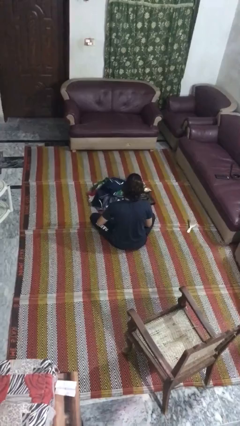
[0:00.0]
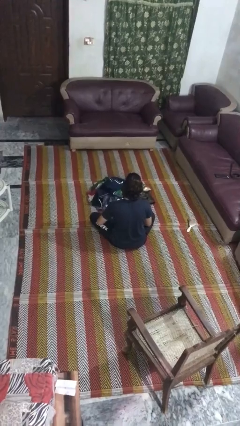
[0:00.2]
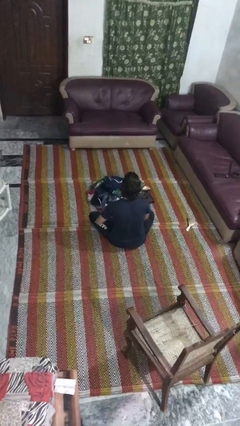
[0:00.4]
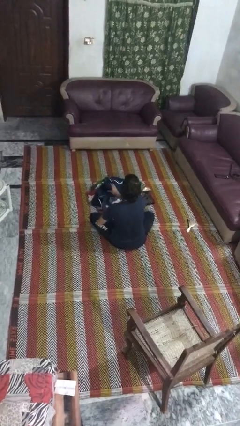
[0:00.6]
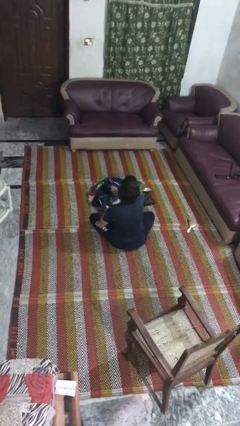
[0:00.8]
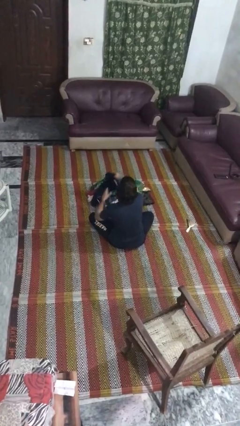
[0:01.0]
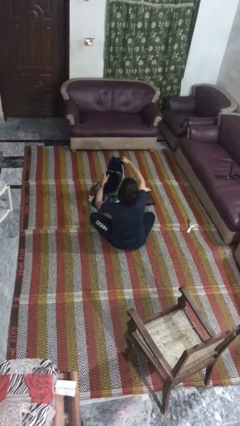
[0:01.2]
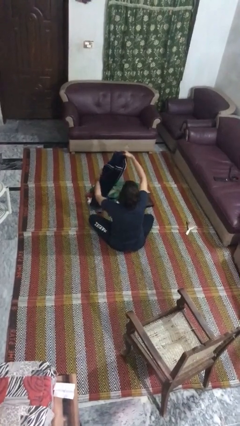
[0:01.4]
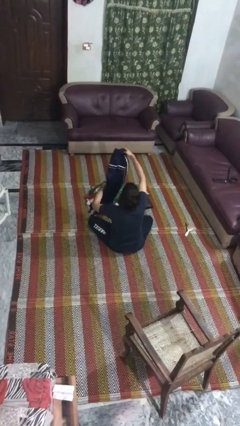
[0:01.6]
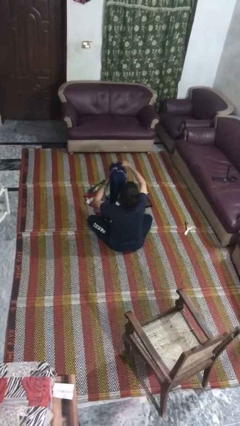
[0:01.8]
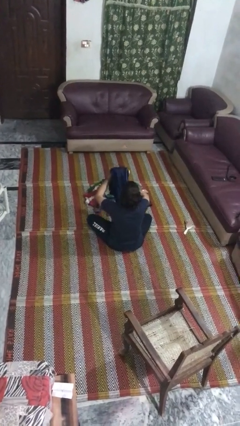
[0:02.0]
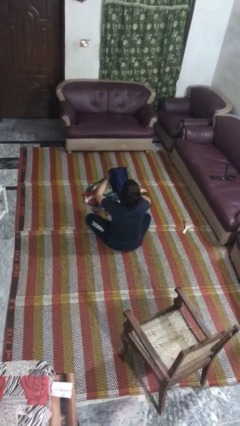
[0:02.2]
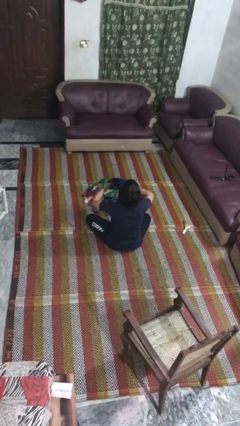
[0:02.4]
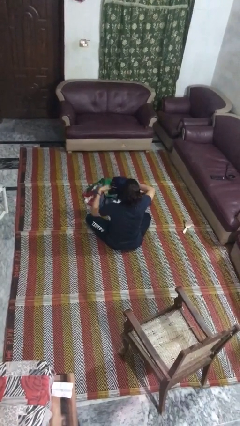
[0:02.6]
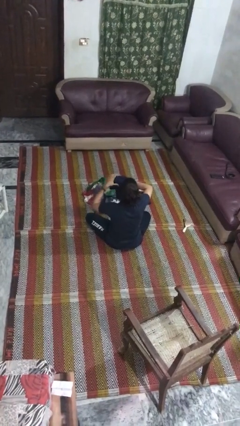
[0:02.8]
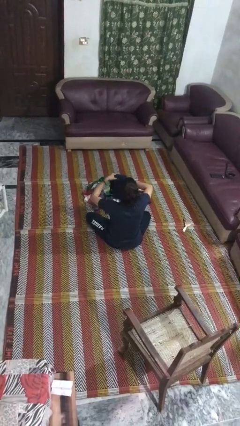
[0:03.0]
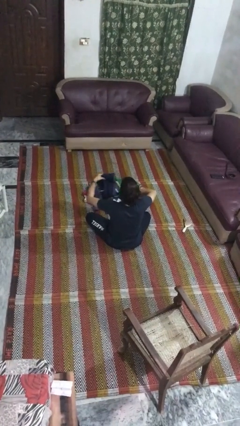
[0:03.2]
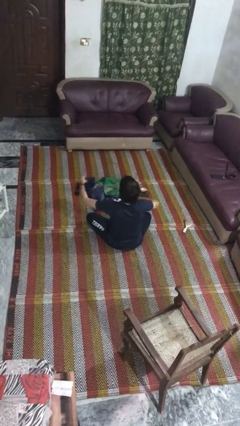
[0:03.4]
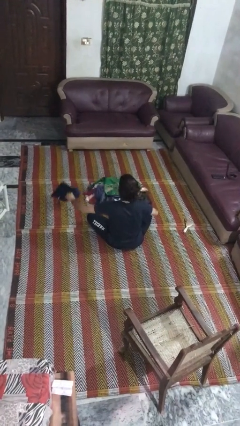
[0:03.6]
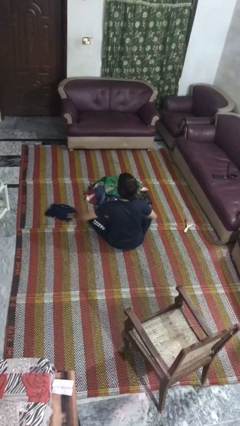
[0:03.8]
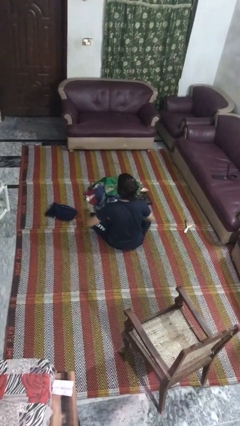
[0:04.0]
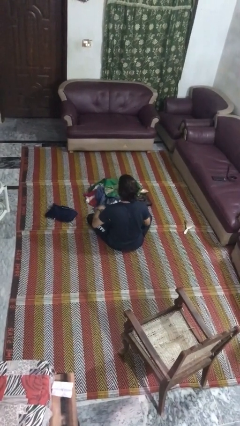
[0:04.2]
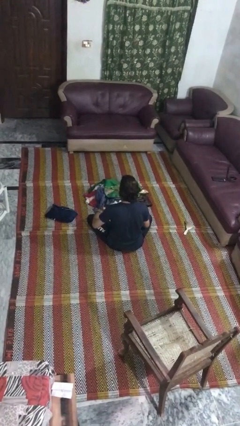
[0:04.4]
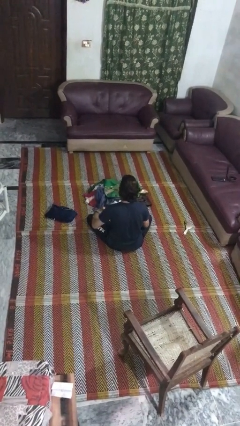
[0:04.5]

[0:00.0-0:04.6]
person folds pants

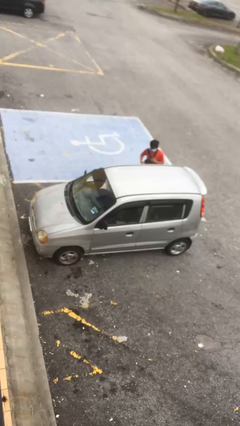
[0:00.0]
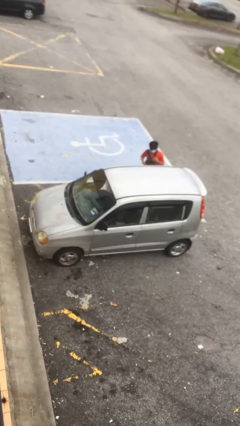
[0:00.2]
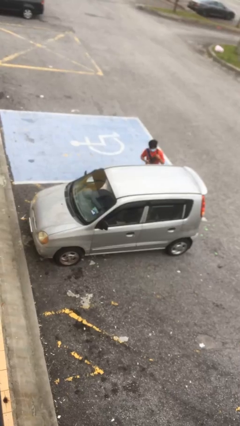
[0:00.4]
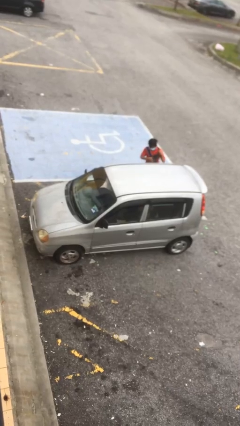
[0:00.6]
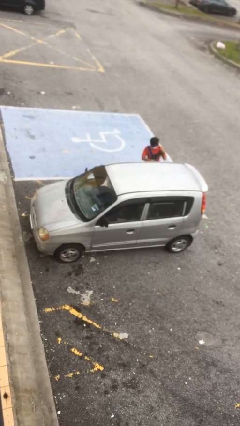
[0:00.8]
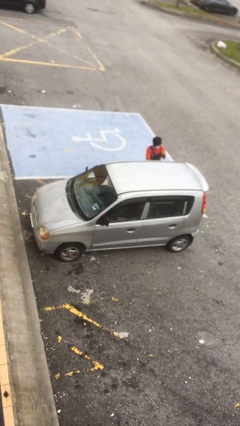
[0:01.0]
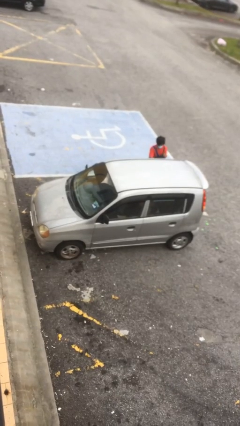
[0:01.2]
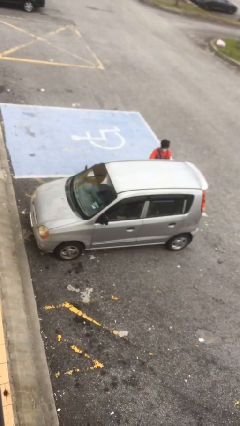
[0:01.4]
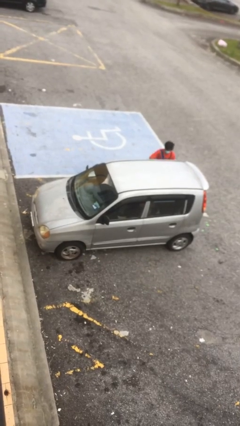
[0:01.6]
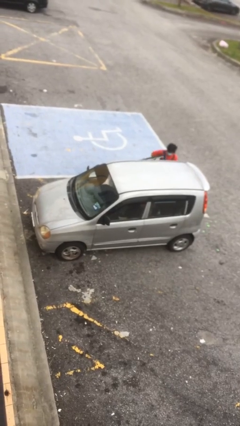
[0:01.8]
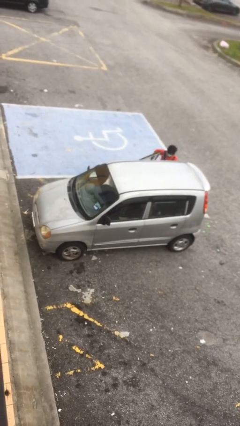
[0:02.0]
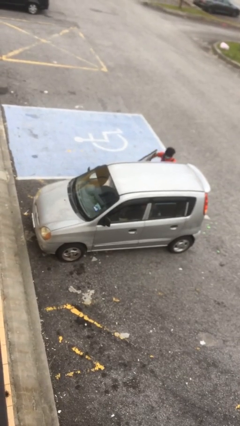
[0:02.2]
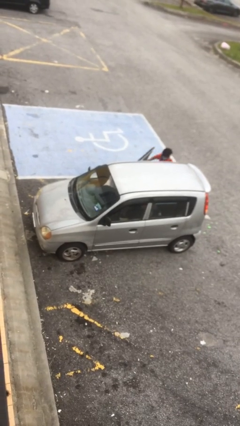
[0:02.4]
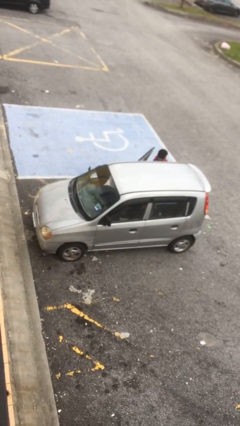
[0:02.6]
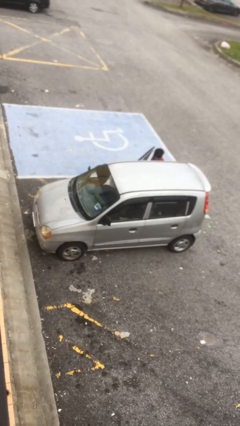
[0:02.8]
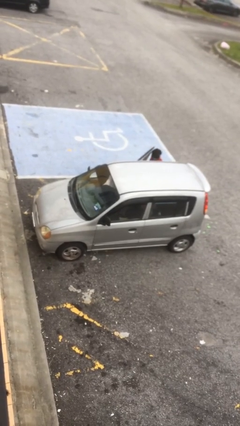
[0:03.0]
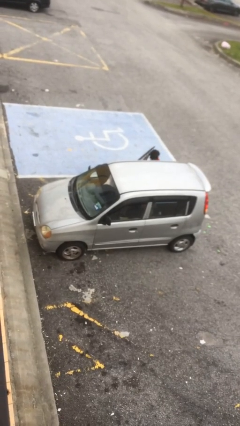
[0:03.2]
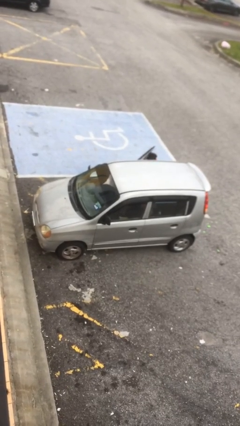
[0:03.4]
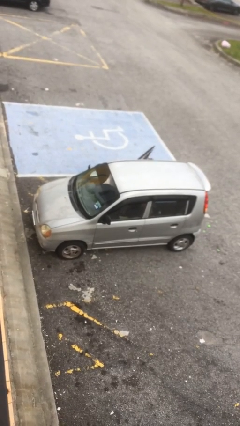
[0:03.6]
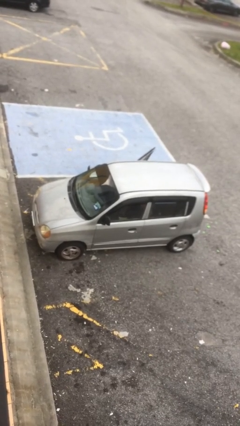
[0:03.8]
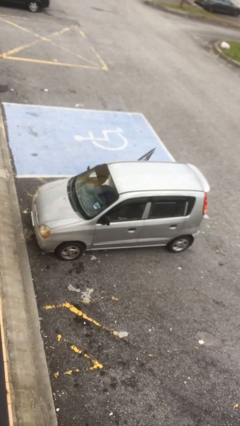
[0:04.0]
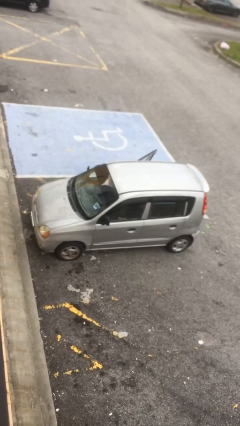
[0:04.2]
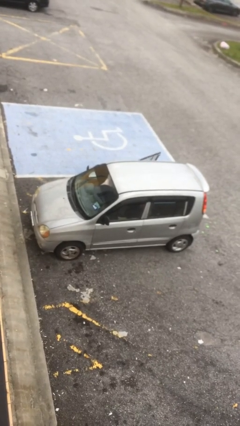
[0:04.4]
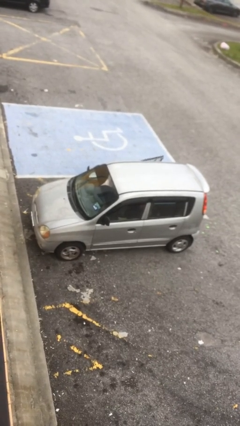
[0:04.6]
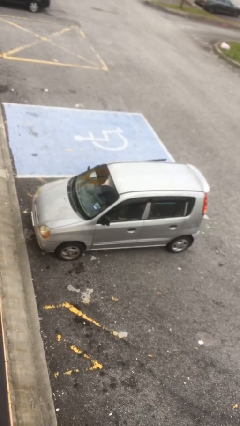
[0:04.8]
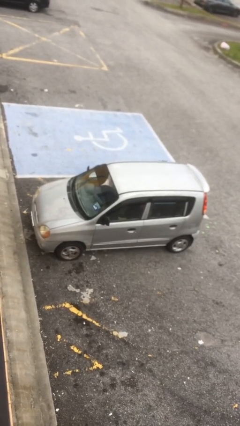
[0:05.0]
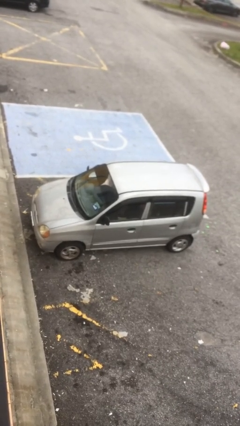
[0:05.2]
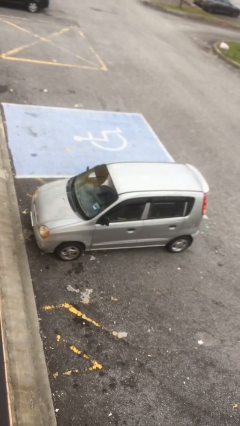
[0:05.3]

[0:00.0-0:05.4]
car picks up person

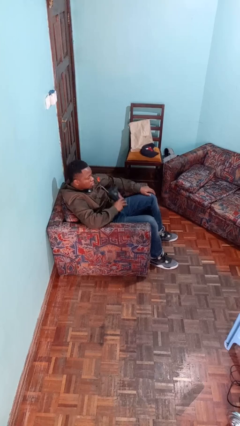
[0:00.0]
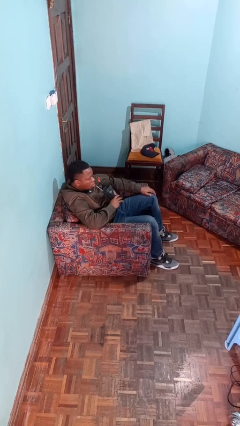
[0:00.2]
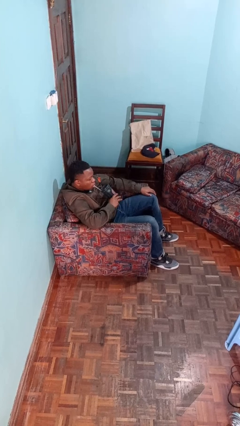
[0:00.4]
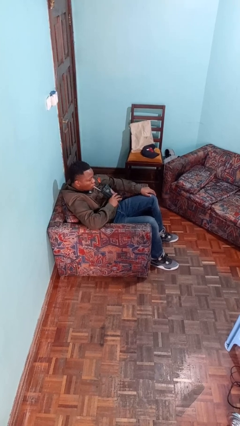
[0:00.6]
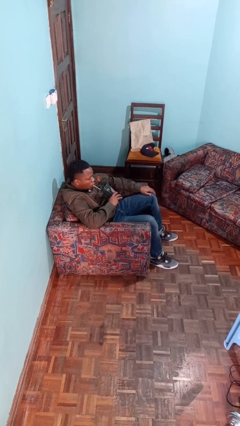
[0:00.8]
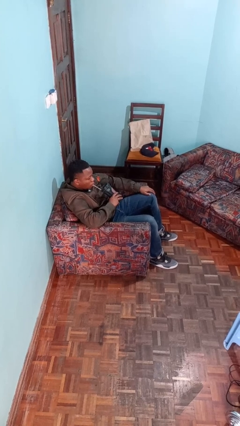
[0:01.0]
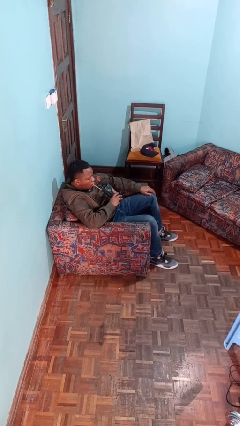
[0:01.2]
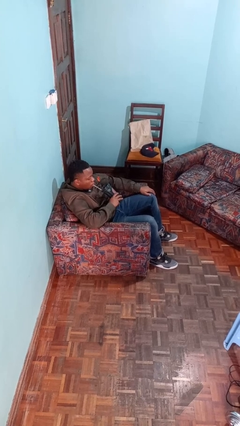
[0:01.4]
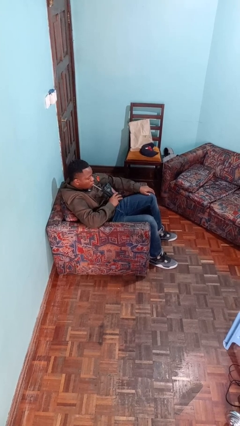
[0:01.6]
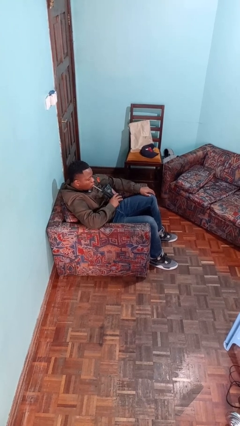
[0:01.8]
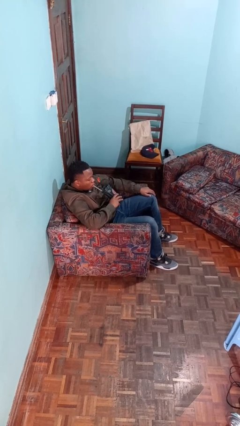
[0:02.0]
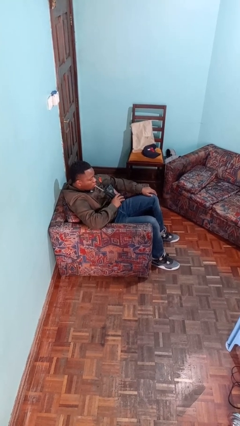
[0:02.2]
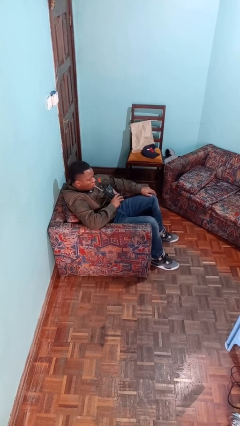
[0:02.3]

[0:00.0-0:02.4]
person drinks from straw

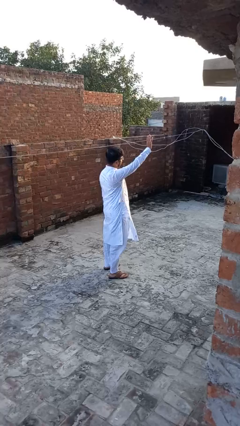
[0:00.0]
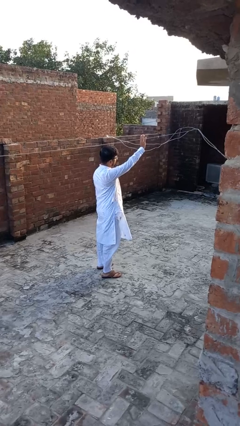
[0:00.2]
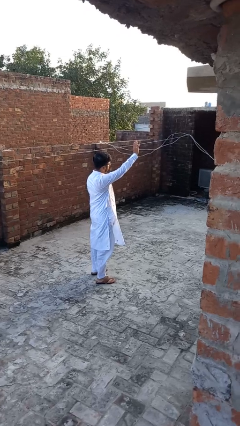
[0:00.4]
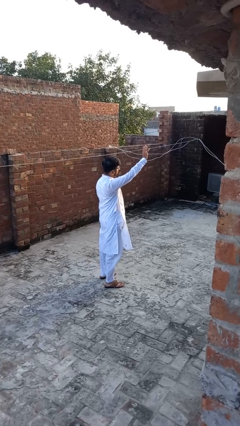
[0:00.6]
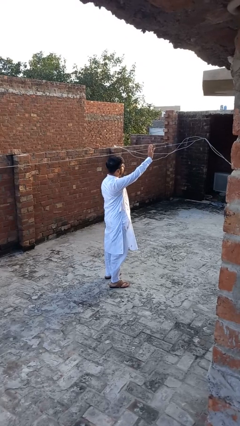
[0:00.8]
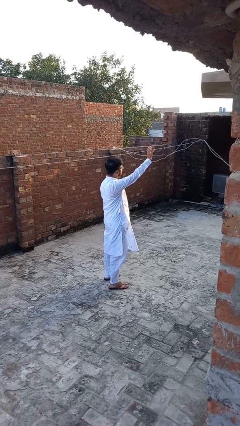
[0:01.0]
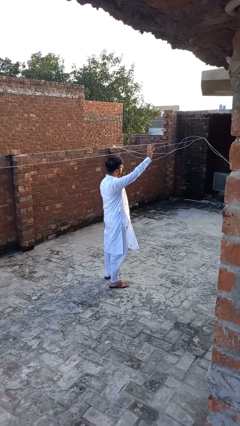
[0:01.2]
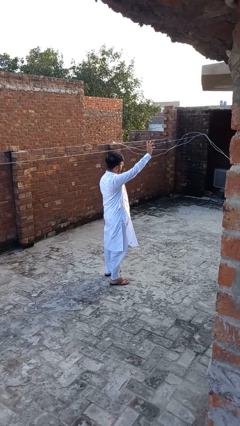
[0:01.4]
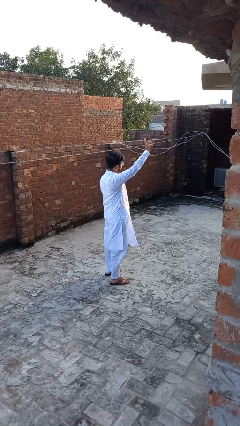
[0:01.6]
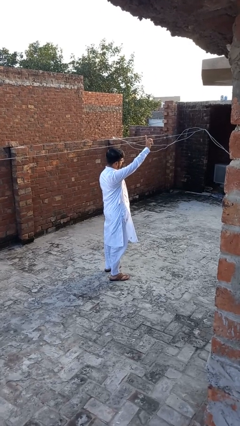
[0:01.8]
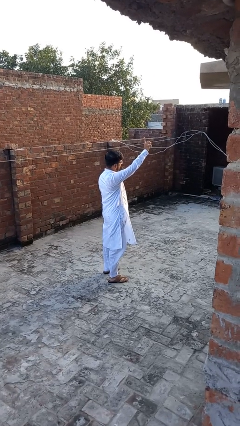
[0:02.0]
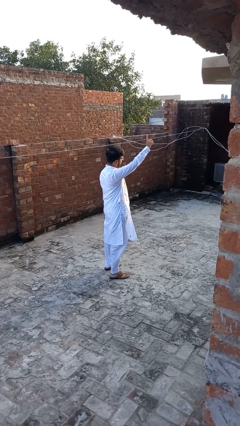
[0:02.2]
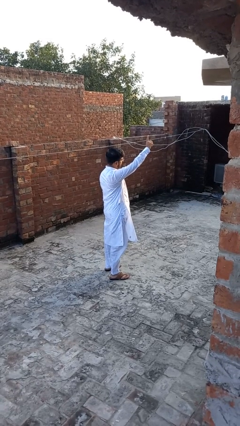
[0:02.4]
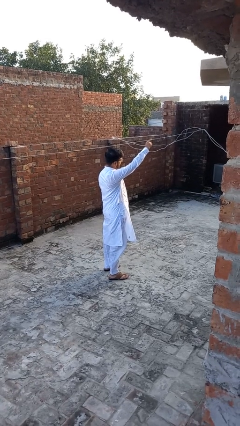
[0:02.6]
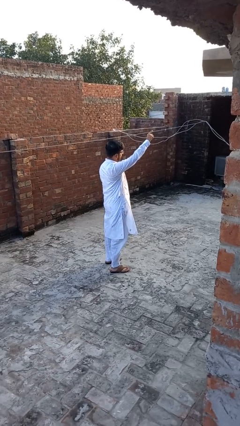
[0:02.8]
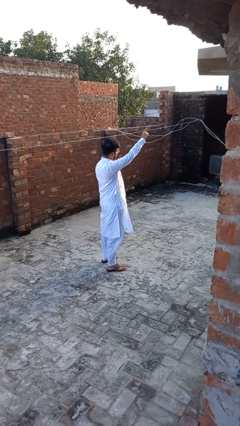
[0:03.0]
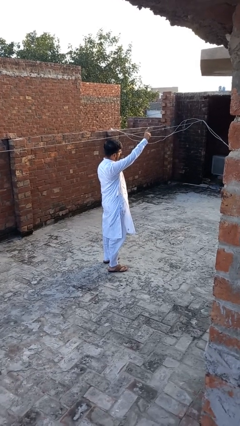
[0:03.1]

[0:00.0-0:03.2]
person gestures raise hand

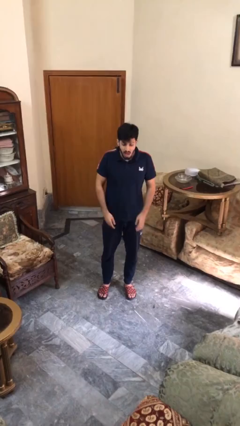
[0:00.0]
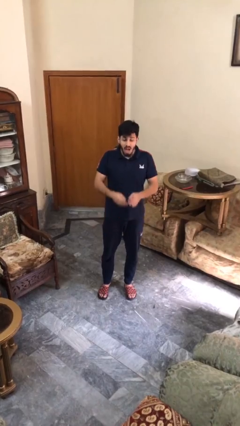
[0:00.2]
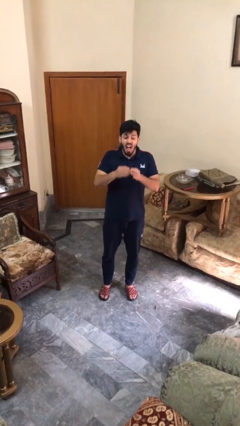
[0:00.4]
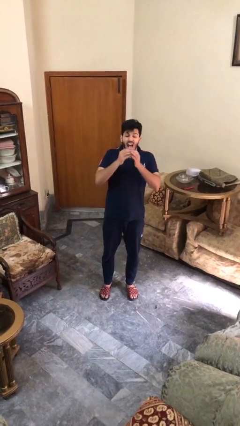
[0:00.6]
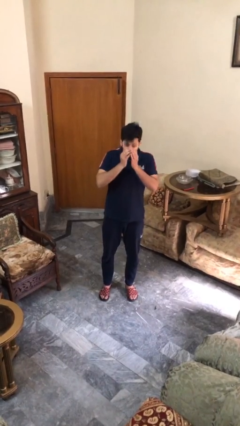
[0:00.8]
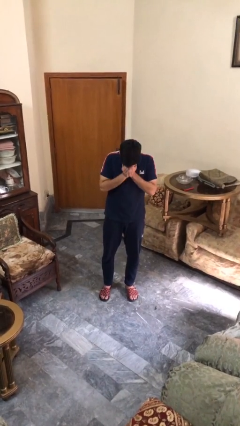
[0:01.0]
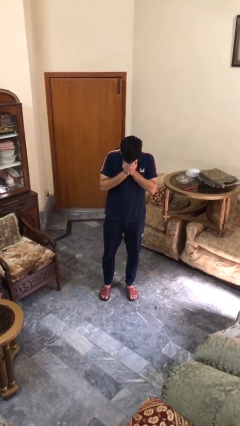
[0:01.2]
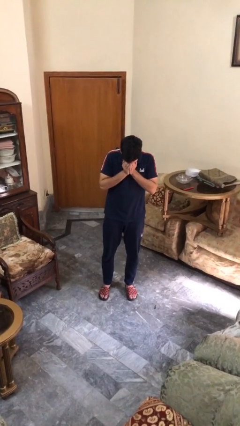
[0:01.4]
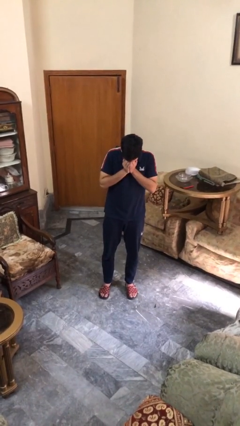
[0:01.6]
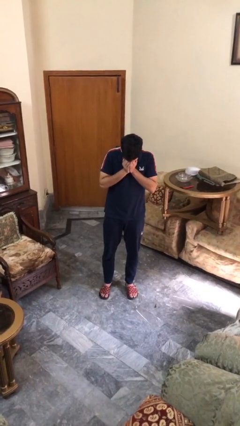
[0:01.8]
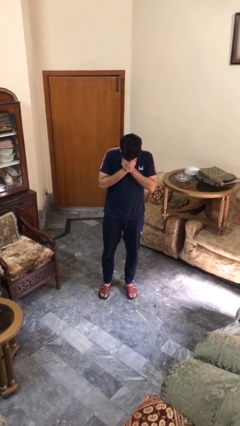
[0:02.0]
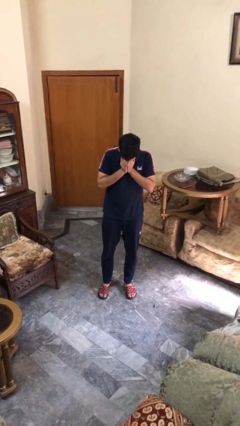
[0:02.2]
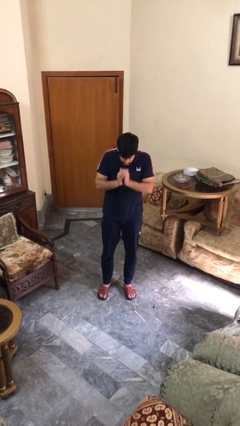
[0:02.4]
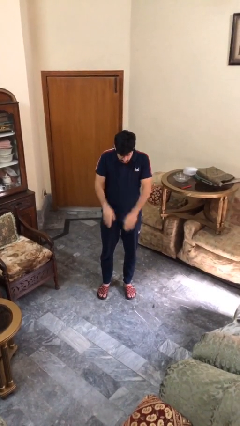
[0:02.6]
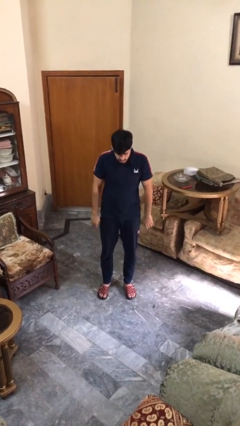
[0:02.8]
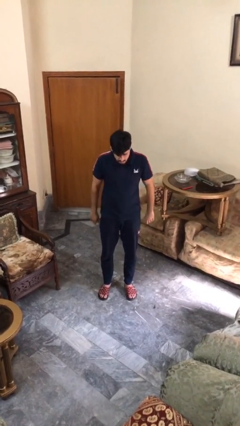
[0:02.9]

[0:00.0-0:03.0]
person sneezes into hand
